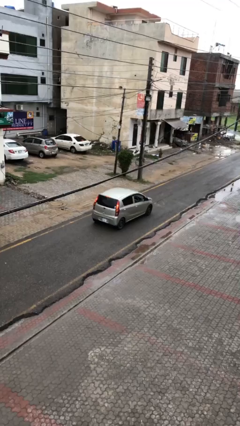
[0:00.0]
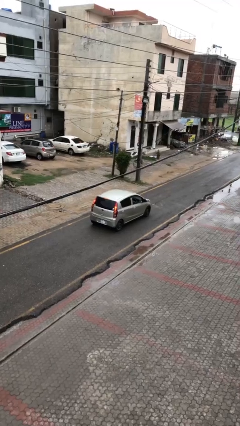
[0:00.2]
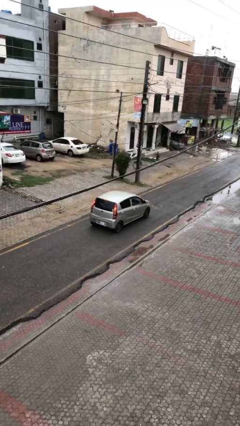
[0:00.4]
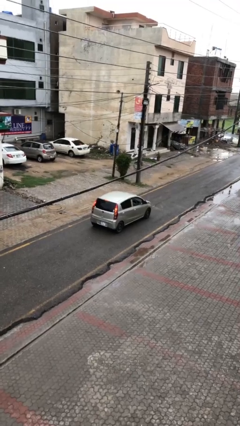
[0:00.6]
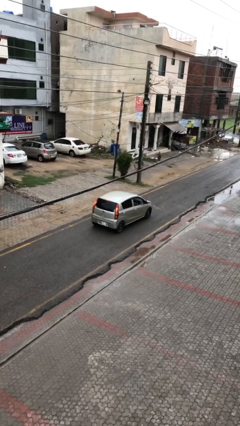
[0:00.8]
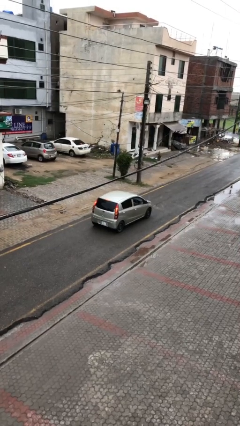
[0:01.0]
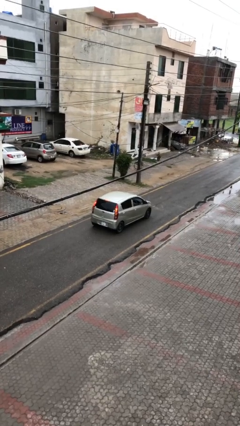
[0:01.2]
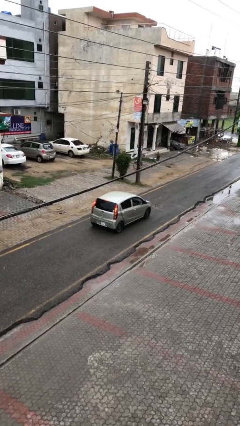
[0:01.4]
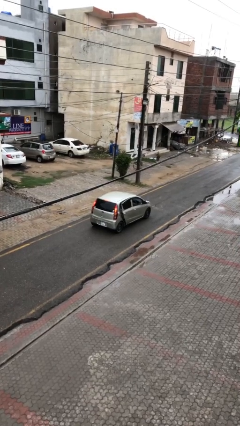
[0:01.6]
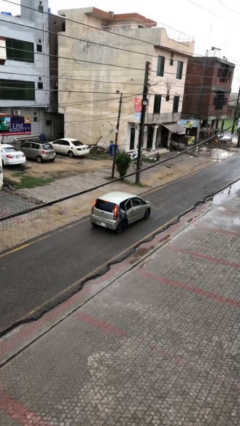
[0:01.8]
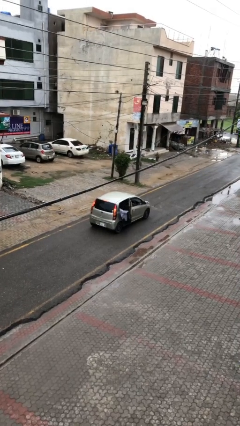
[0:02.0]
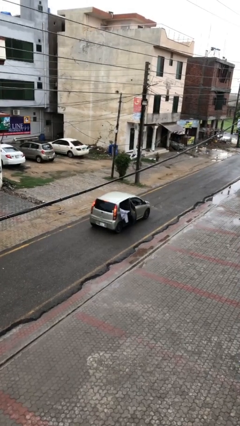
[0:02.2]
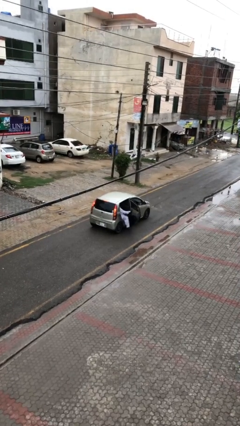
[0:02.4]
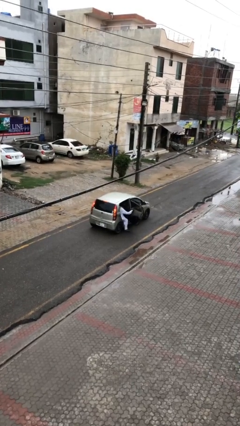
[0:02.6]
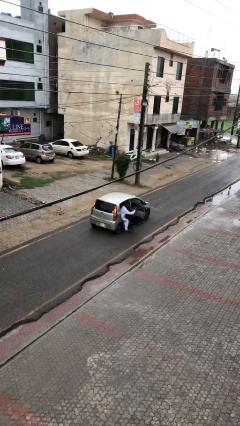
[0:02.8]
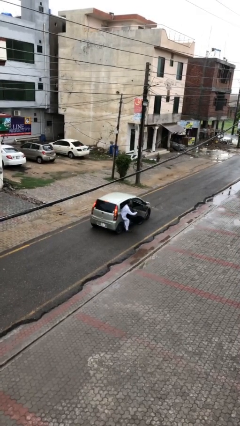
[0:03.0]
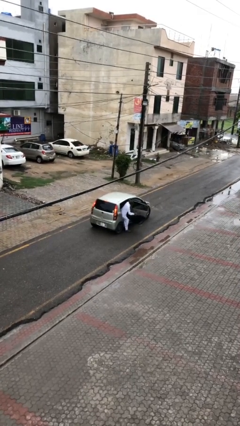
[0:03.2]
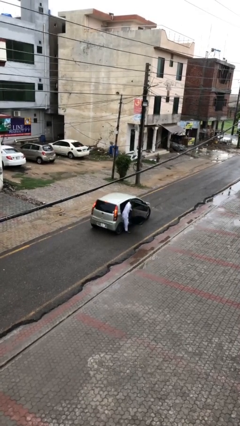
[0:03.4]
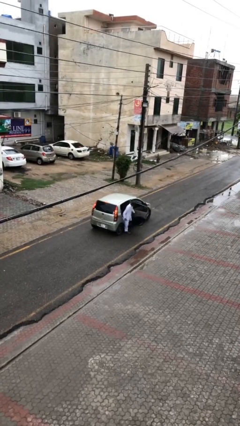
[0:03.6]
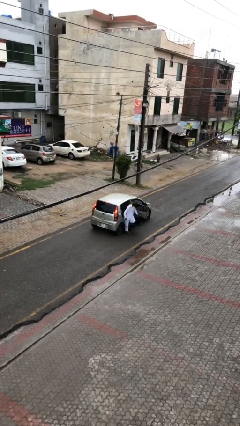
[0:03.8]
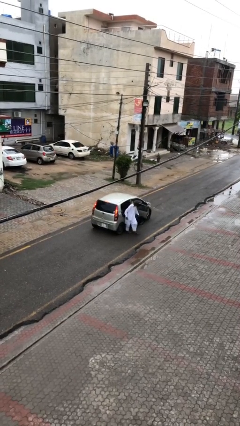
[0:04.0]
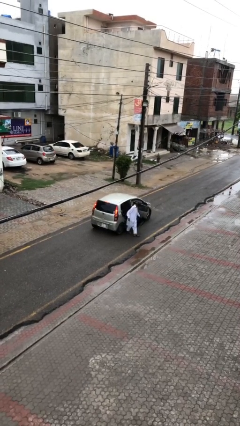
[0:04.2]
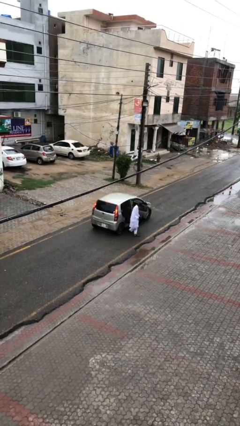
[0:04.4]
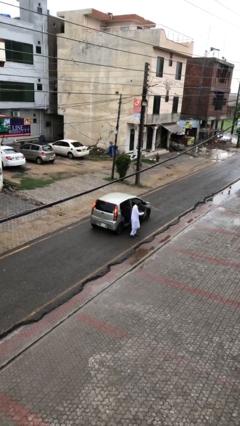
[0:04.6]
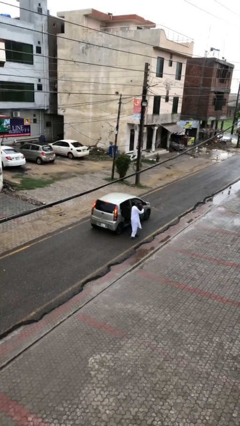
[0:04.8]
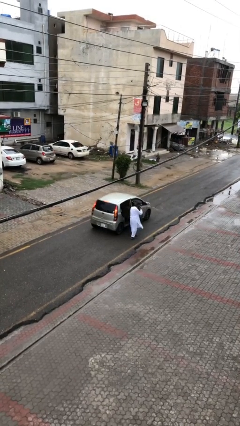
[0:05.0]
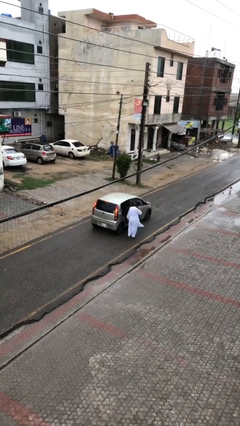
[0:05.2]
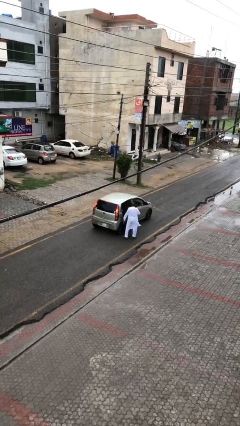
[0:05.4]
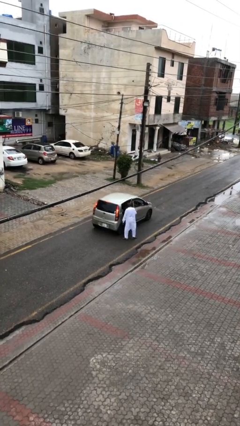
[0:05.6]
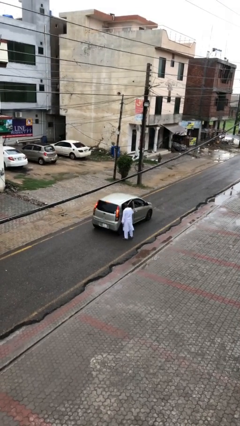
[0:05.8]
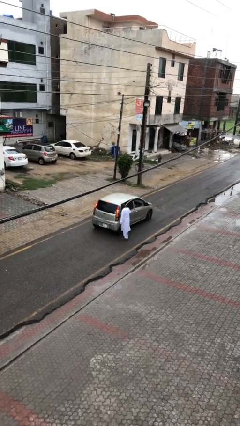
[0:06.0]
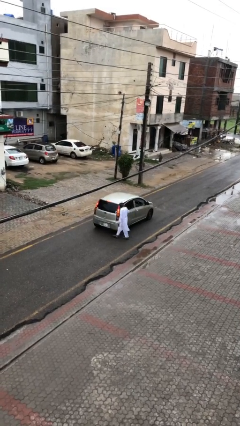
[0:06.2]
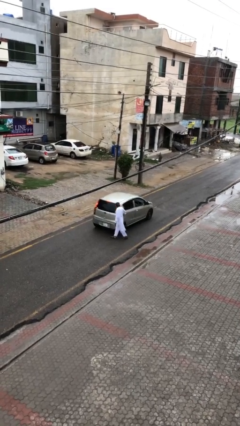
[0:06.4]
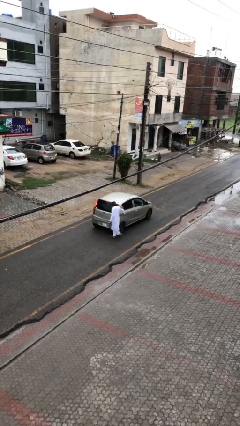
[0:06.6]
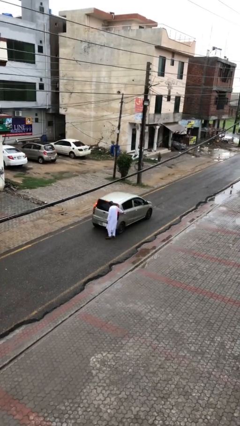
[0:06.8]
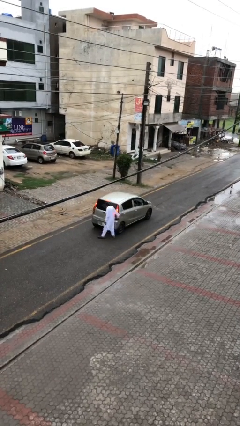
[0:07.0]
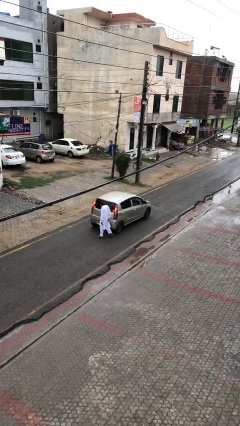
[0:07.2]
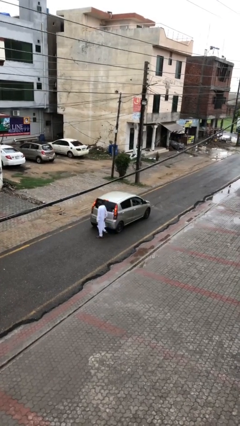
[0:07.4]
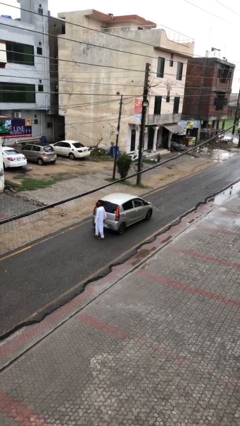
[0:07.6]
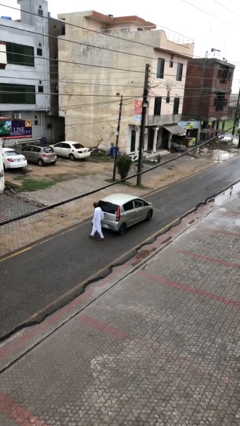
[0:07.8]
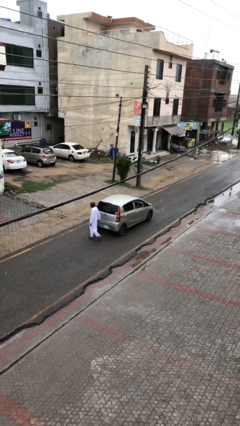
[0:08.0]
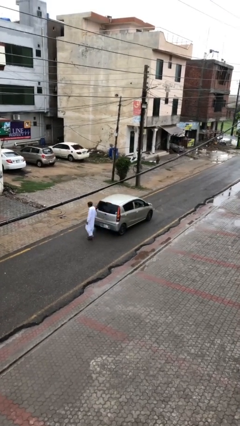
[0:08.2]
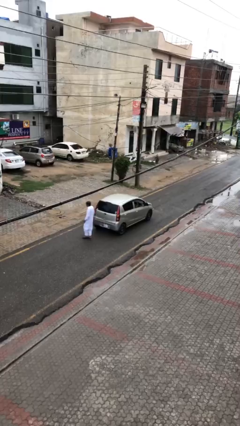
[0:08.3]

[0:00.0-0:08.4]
car drops off person

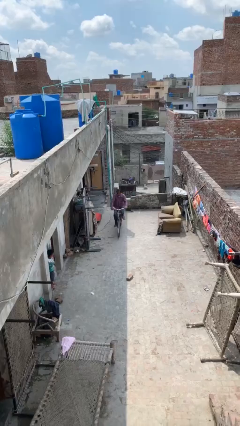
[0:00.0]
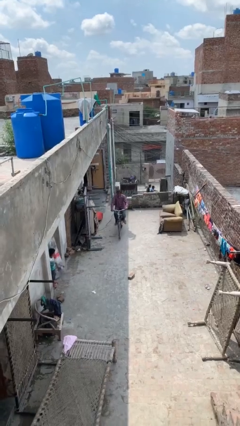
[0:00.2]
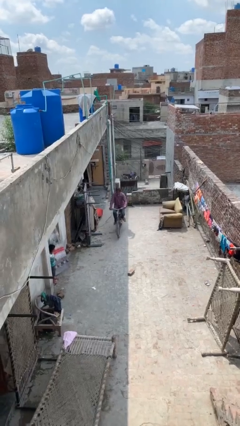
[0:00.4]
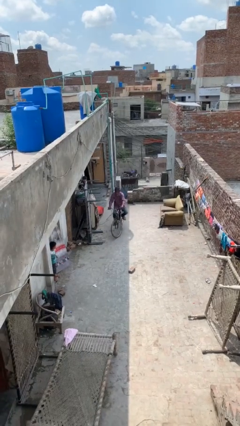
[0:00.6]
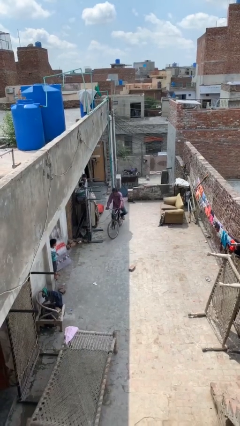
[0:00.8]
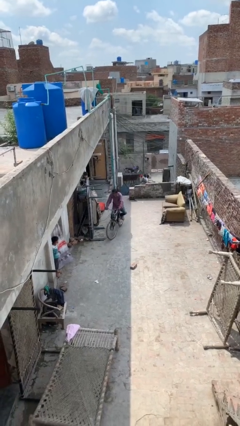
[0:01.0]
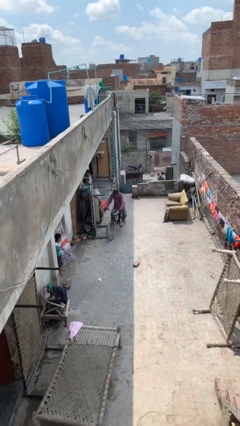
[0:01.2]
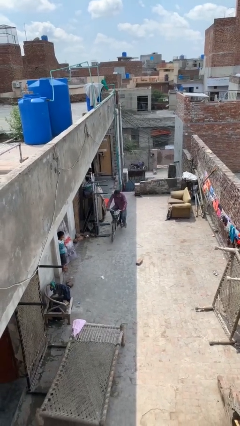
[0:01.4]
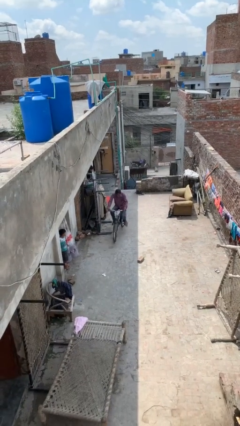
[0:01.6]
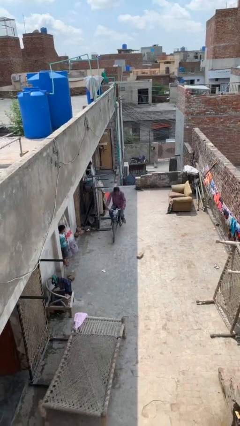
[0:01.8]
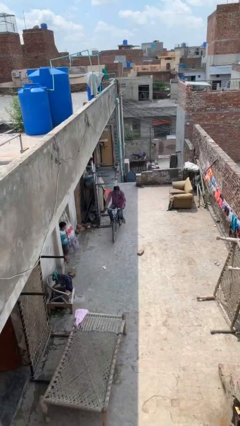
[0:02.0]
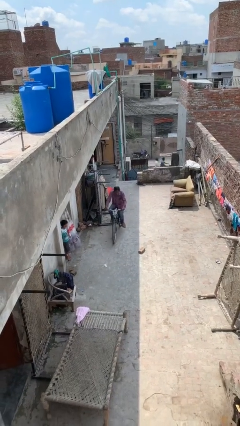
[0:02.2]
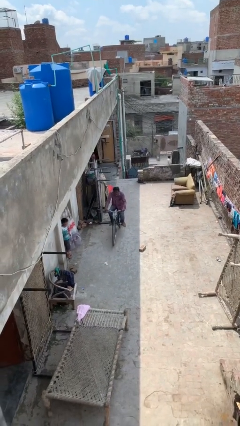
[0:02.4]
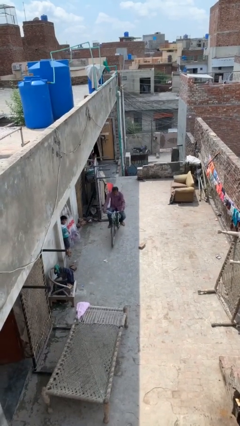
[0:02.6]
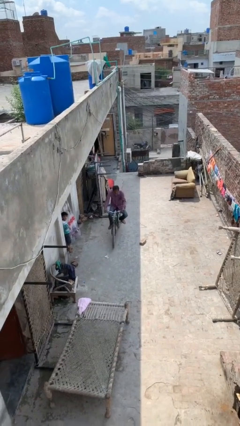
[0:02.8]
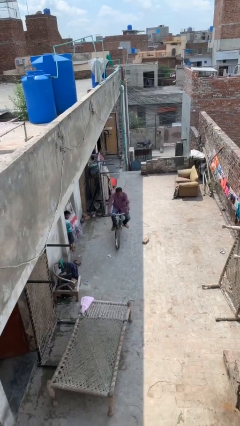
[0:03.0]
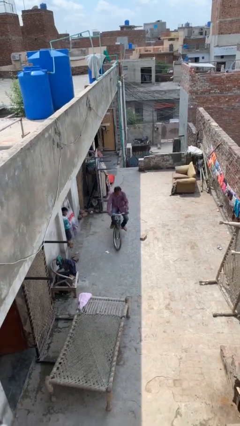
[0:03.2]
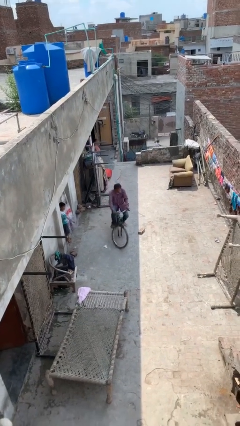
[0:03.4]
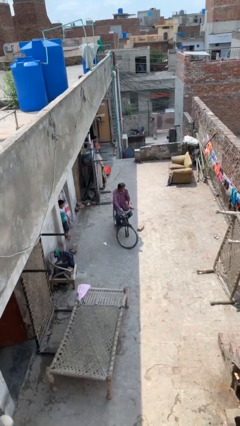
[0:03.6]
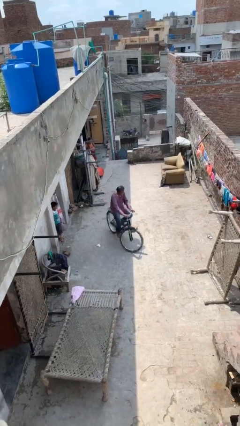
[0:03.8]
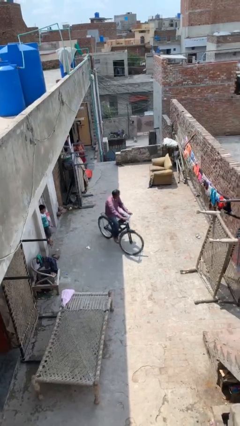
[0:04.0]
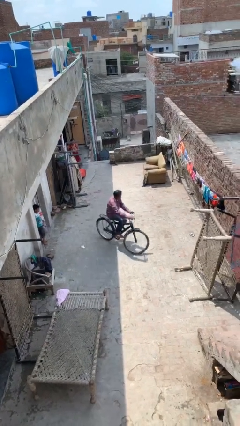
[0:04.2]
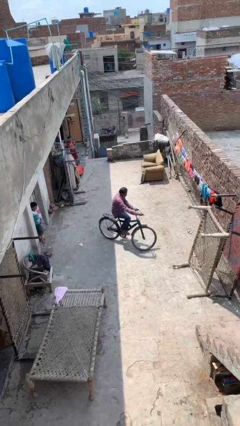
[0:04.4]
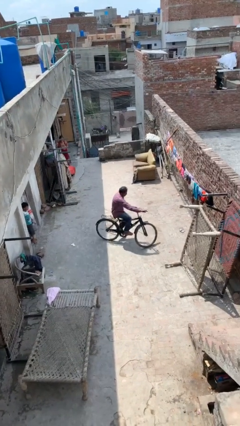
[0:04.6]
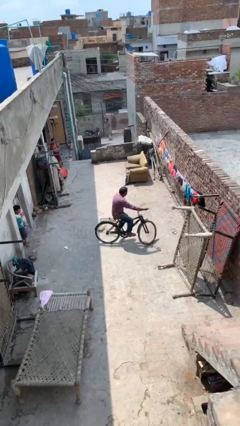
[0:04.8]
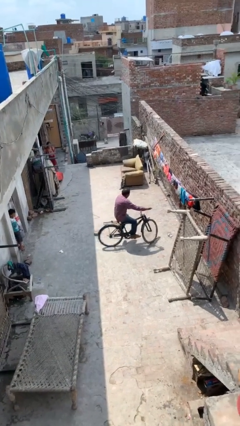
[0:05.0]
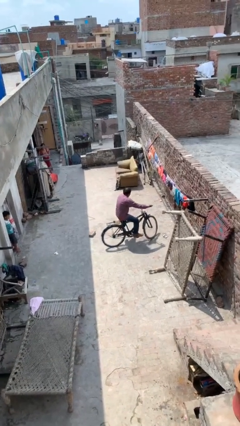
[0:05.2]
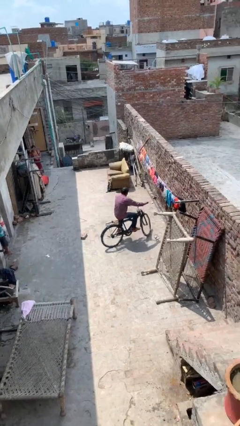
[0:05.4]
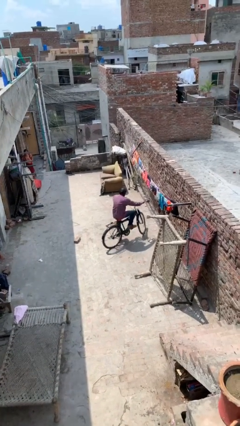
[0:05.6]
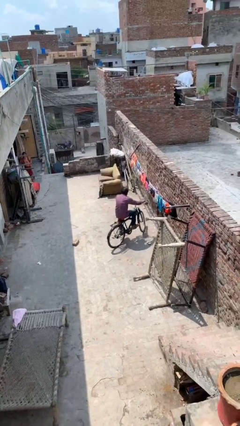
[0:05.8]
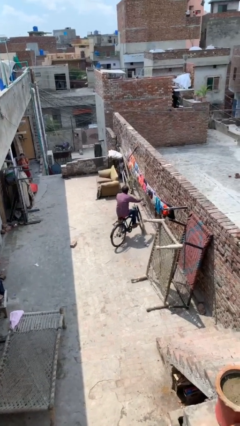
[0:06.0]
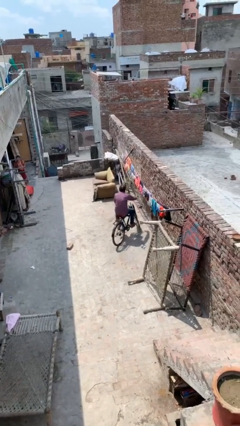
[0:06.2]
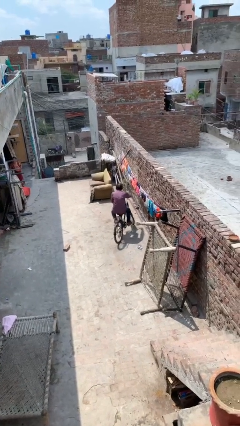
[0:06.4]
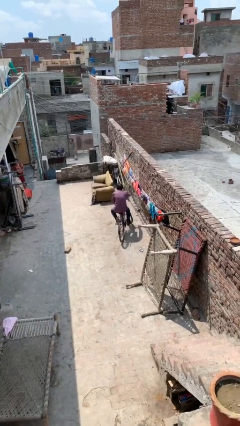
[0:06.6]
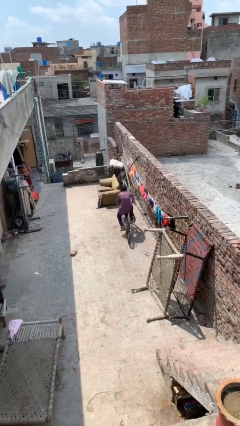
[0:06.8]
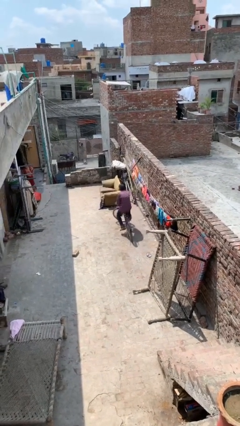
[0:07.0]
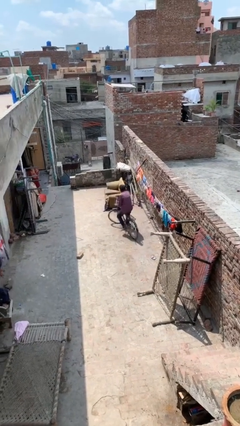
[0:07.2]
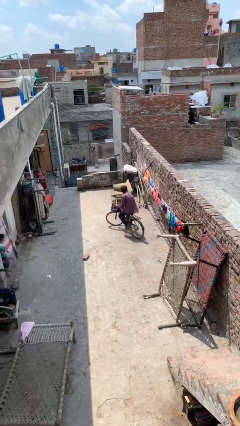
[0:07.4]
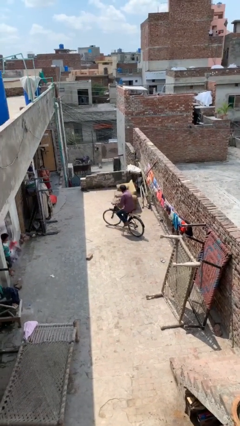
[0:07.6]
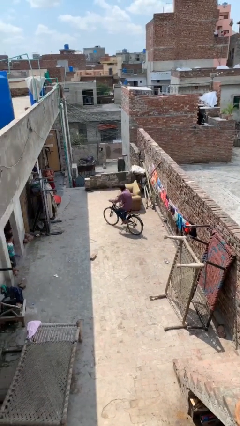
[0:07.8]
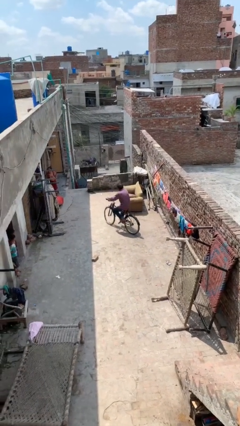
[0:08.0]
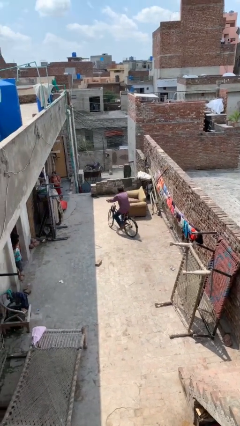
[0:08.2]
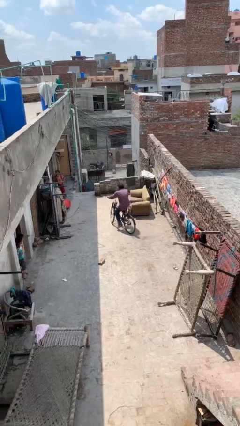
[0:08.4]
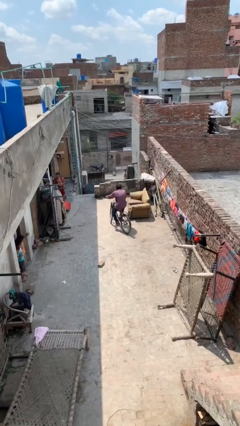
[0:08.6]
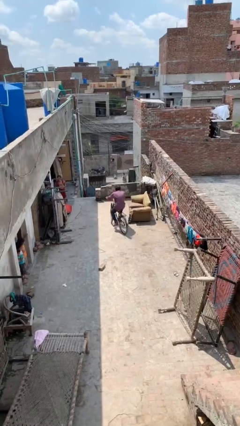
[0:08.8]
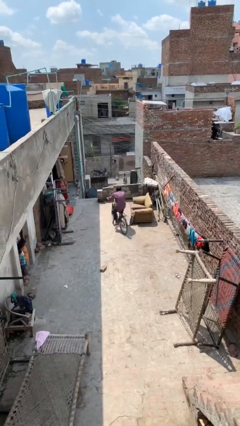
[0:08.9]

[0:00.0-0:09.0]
person rides bicycle
